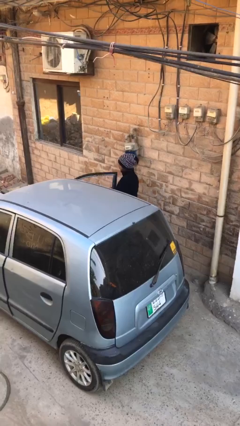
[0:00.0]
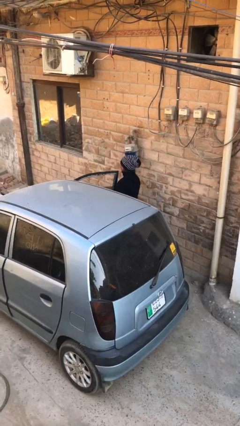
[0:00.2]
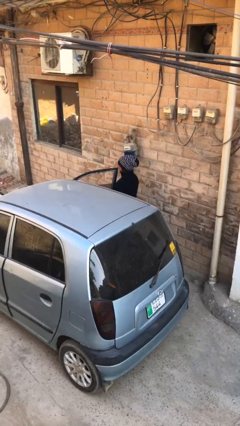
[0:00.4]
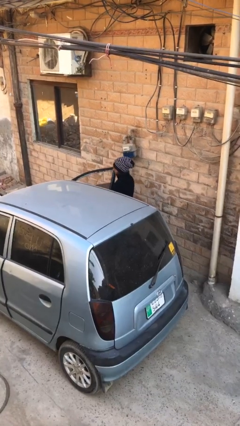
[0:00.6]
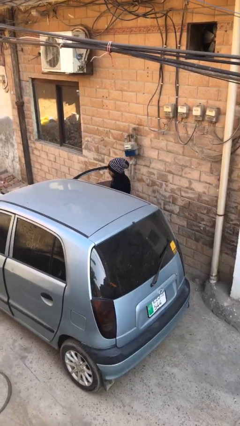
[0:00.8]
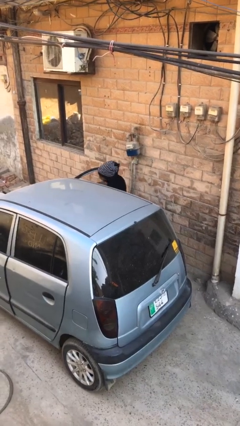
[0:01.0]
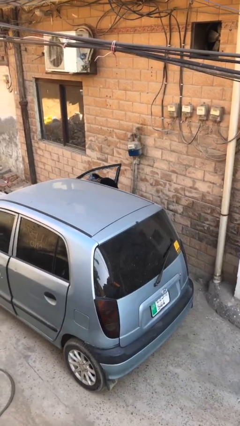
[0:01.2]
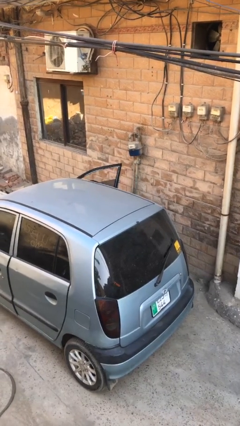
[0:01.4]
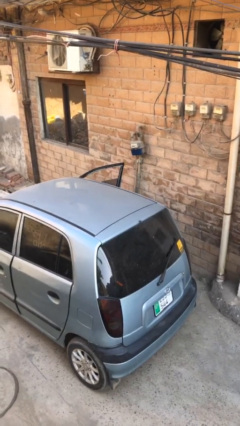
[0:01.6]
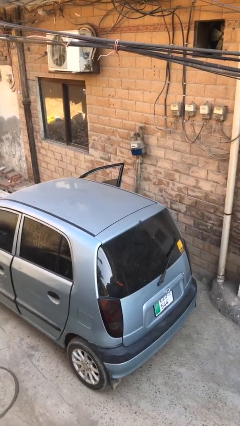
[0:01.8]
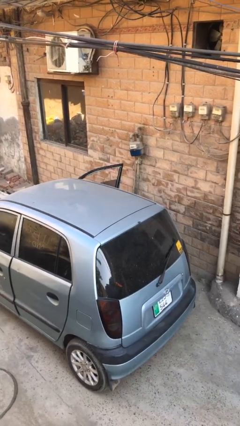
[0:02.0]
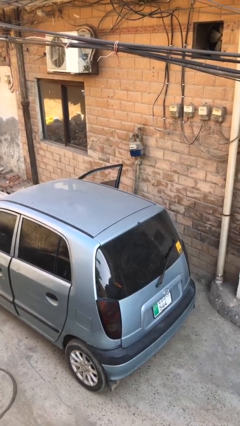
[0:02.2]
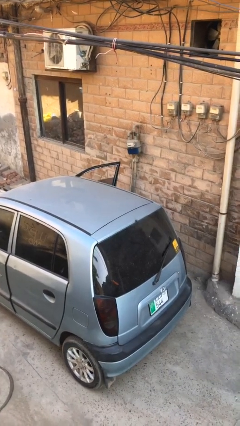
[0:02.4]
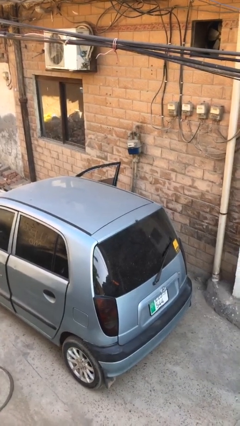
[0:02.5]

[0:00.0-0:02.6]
person enters car

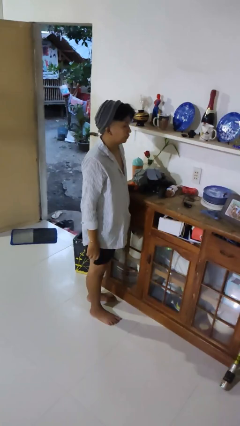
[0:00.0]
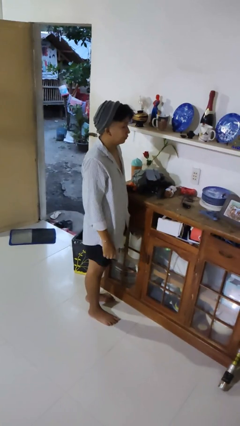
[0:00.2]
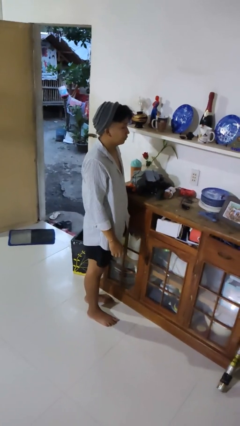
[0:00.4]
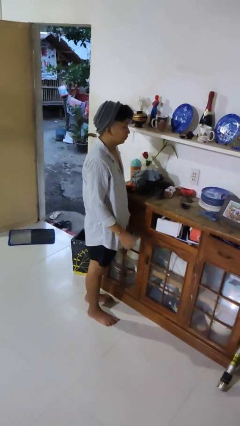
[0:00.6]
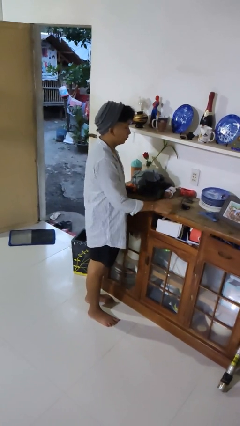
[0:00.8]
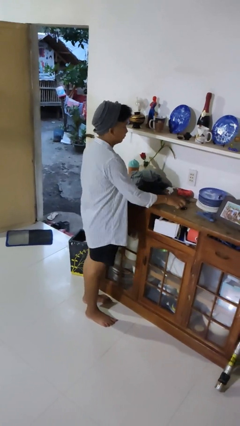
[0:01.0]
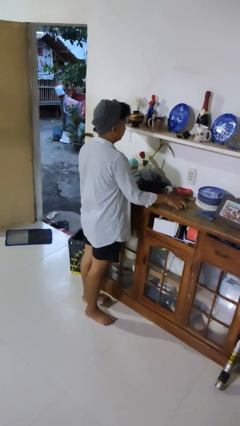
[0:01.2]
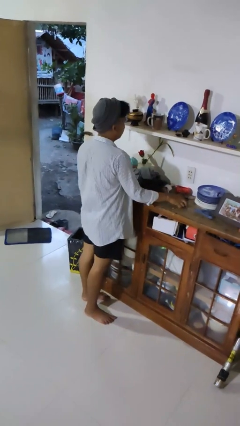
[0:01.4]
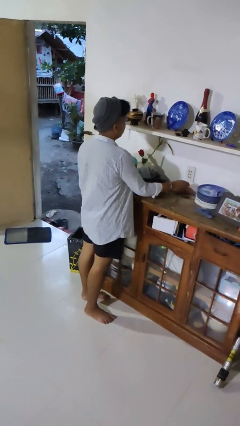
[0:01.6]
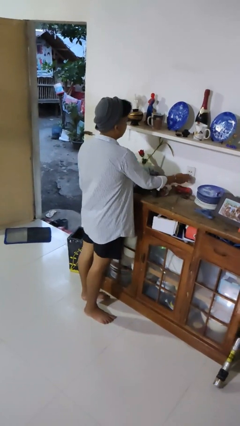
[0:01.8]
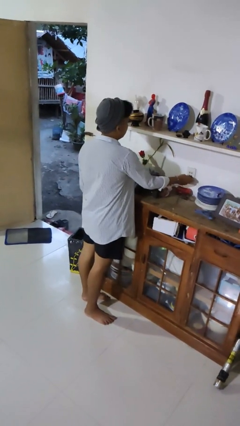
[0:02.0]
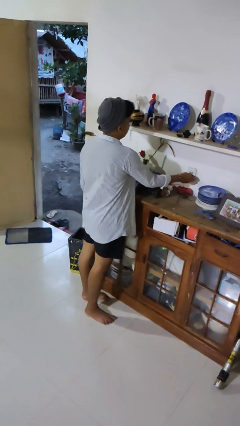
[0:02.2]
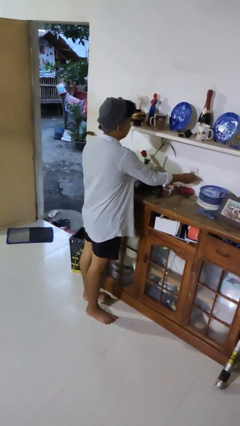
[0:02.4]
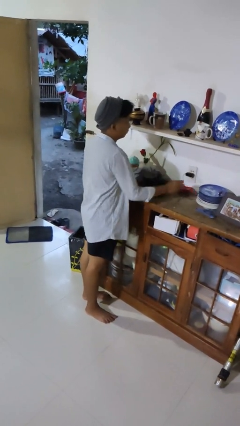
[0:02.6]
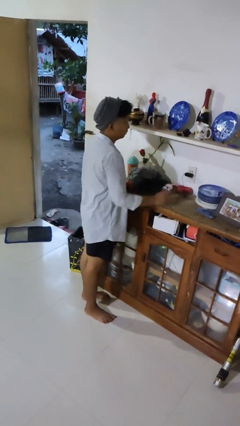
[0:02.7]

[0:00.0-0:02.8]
person plugs into electrical socket

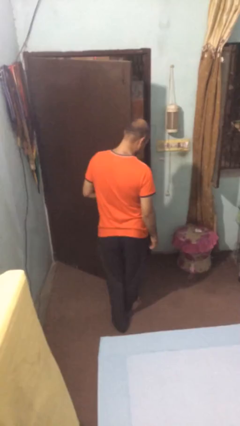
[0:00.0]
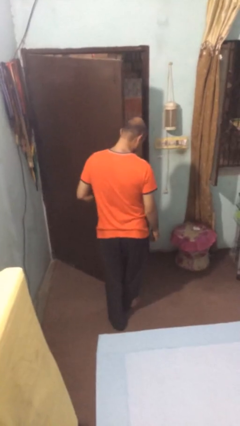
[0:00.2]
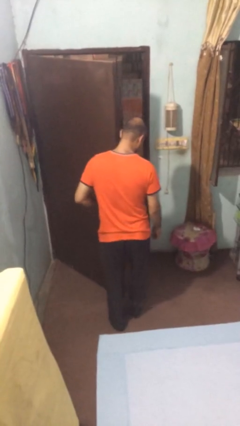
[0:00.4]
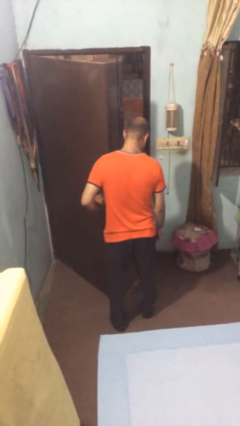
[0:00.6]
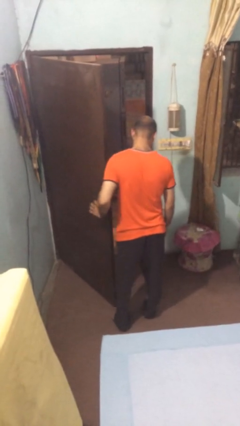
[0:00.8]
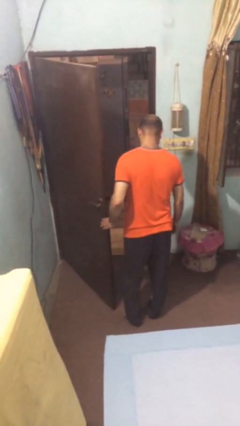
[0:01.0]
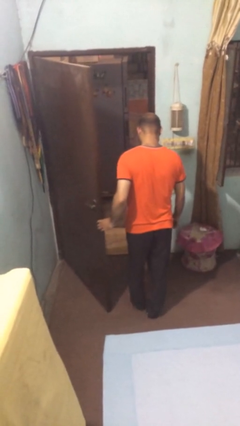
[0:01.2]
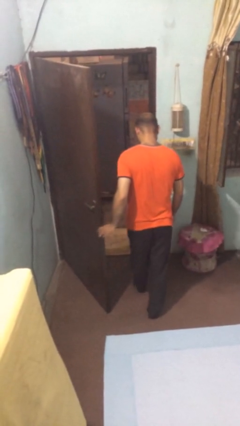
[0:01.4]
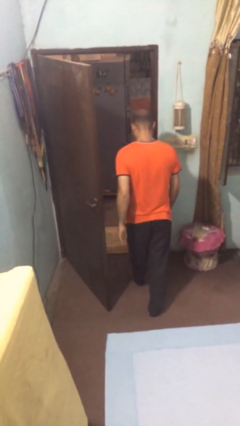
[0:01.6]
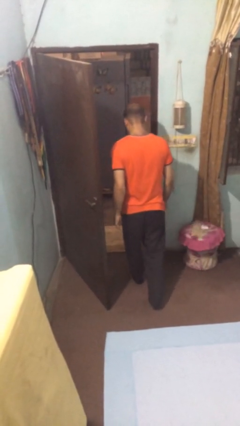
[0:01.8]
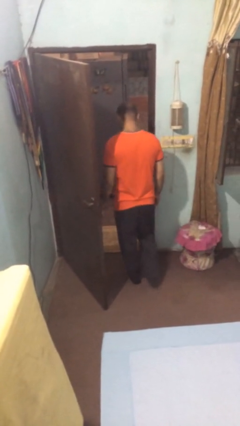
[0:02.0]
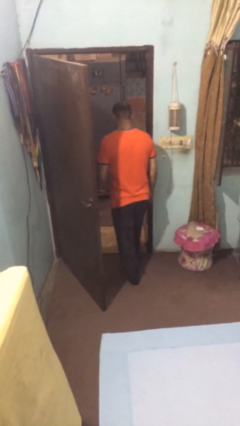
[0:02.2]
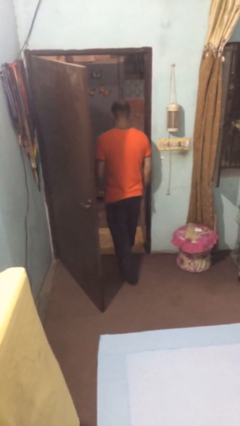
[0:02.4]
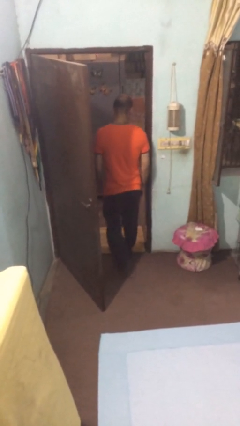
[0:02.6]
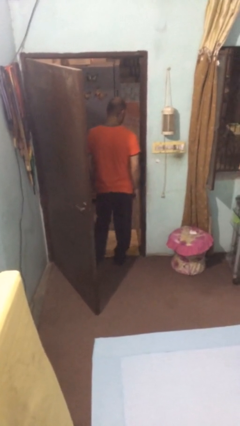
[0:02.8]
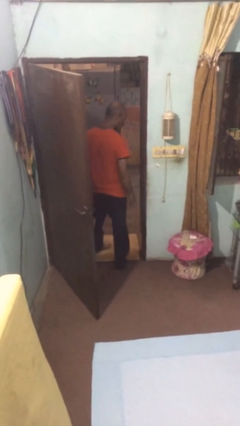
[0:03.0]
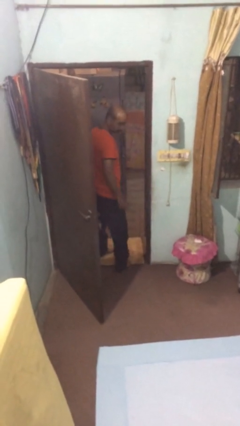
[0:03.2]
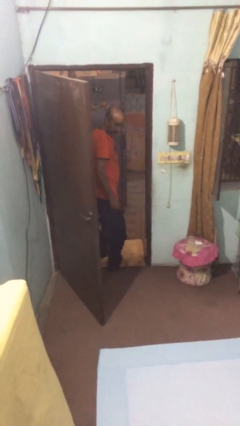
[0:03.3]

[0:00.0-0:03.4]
person exits scene through structure

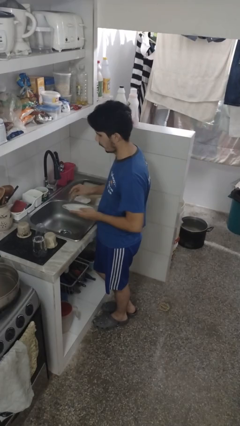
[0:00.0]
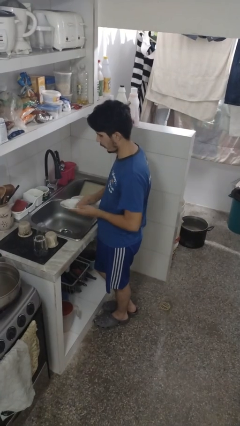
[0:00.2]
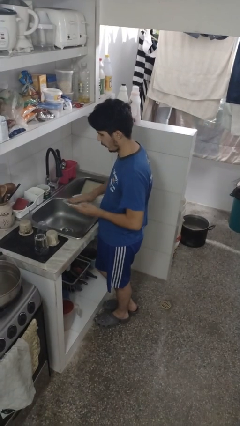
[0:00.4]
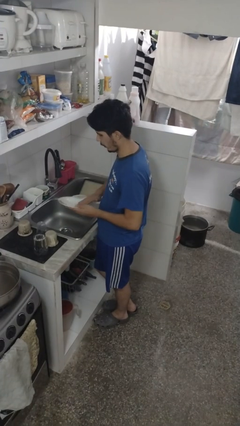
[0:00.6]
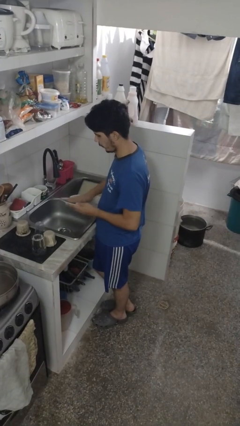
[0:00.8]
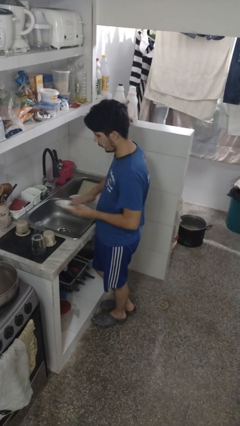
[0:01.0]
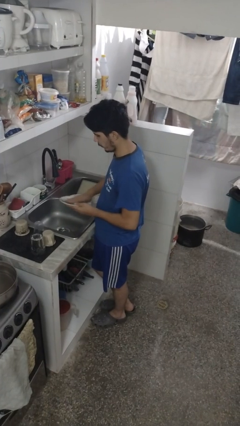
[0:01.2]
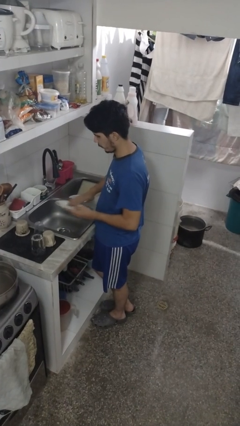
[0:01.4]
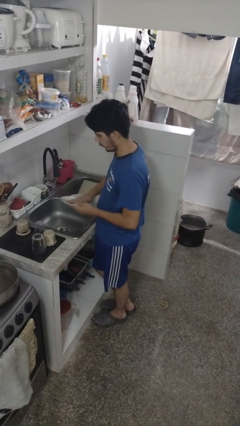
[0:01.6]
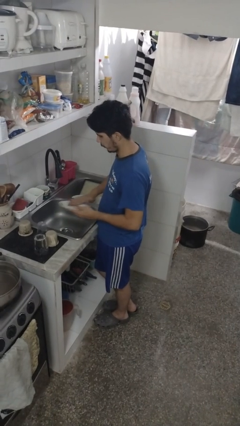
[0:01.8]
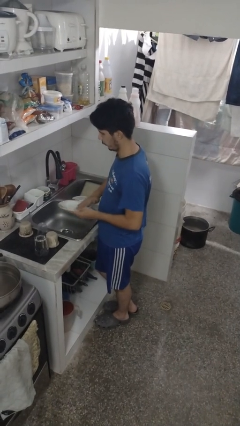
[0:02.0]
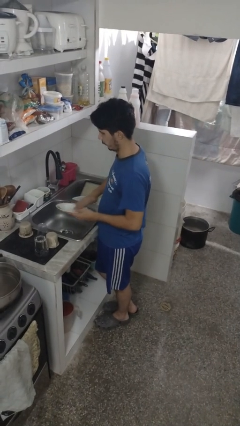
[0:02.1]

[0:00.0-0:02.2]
person washes dish

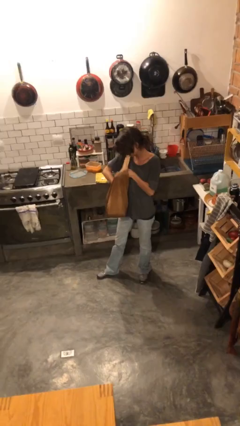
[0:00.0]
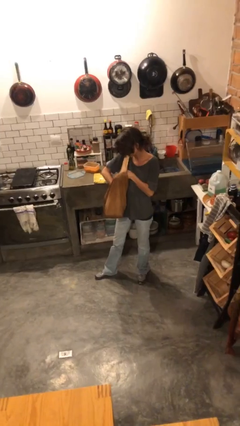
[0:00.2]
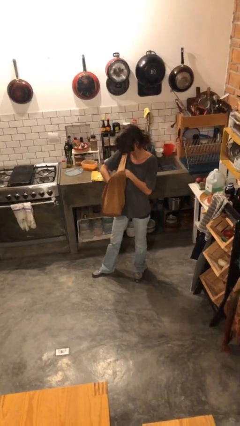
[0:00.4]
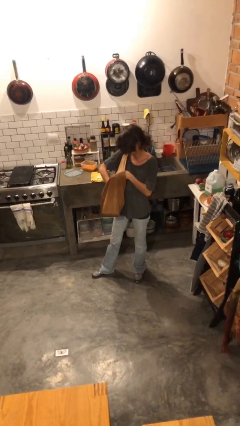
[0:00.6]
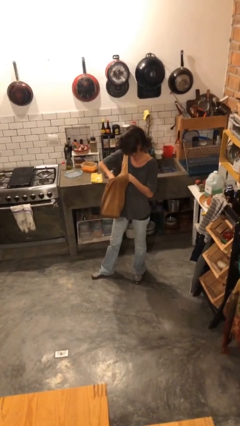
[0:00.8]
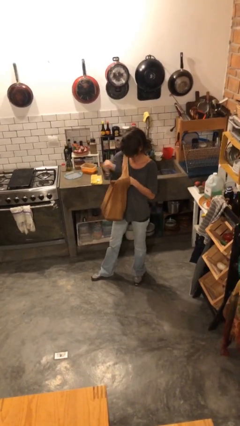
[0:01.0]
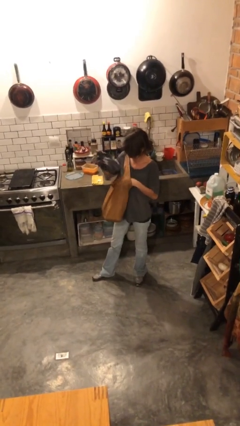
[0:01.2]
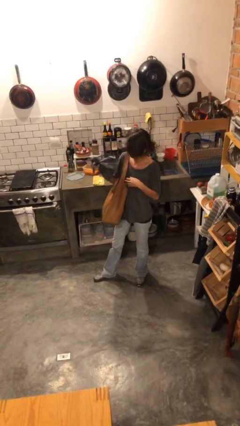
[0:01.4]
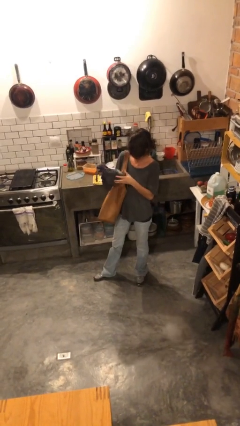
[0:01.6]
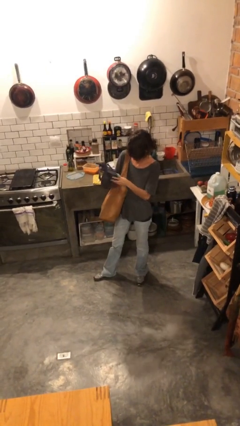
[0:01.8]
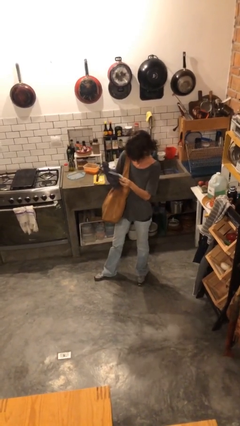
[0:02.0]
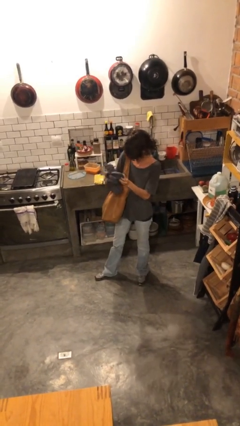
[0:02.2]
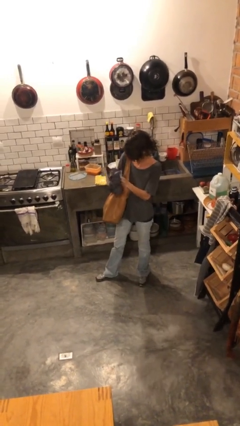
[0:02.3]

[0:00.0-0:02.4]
person takes object from purse

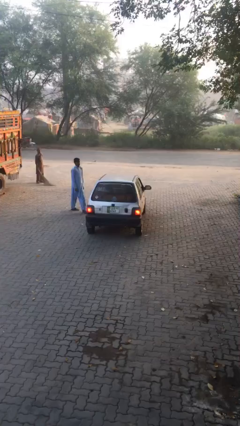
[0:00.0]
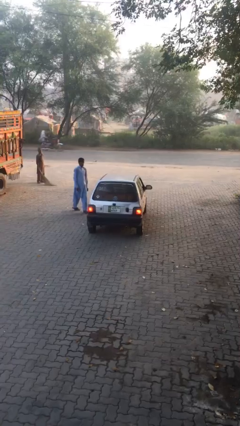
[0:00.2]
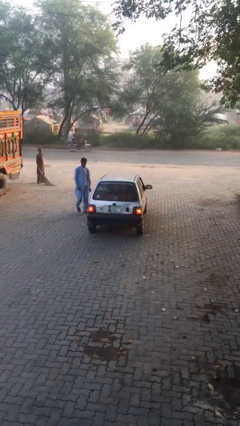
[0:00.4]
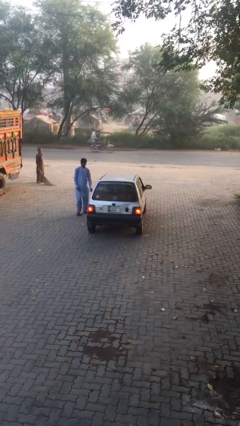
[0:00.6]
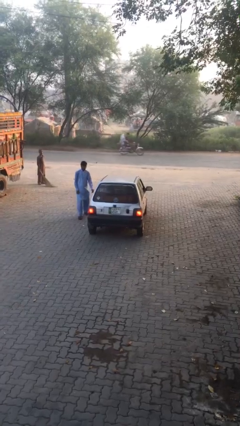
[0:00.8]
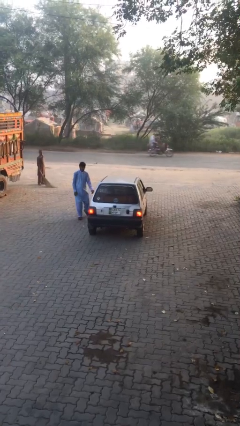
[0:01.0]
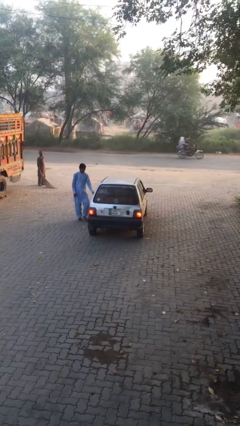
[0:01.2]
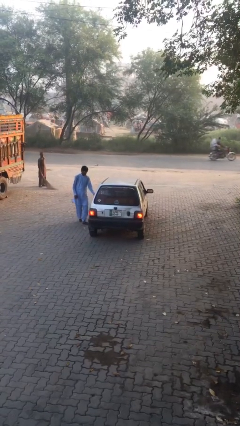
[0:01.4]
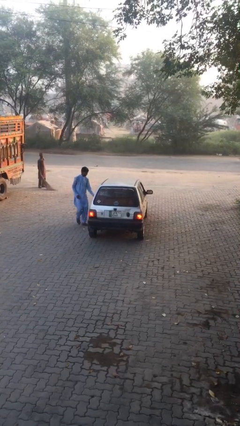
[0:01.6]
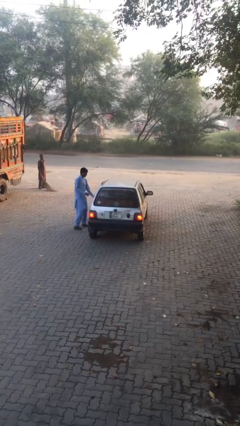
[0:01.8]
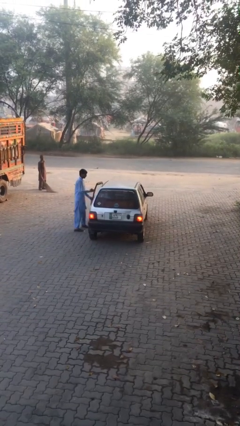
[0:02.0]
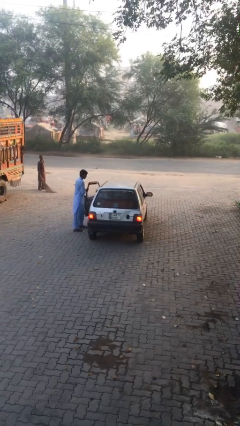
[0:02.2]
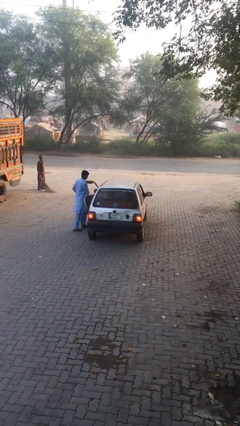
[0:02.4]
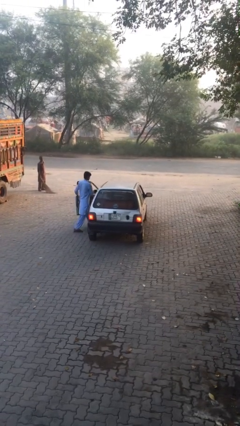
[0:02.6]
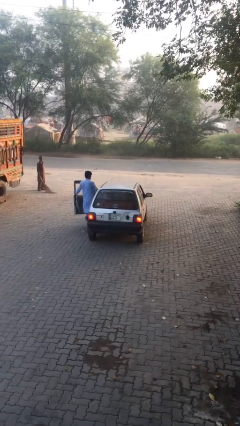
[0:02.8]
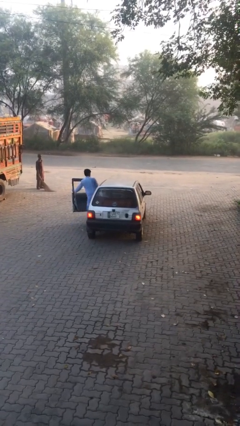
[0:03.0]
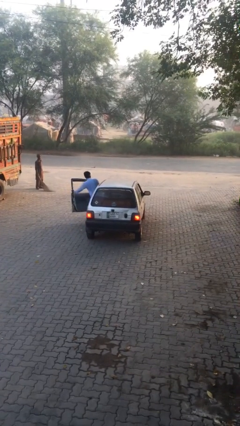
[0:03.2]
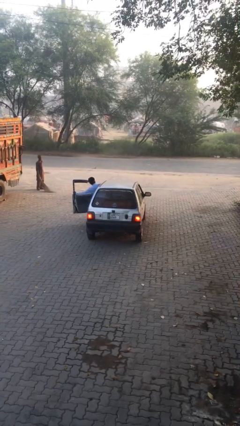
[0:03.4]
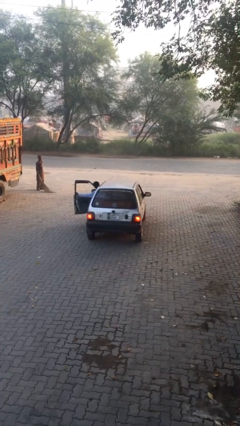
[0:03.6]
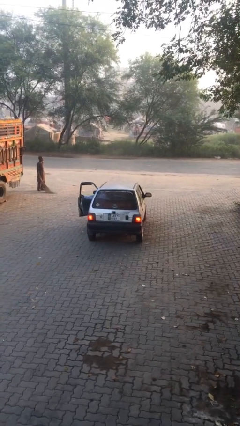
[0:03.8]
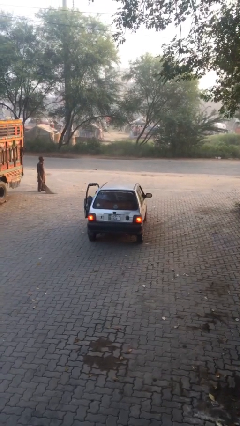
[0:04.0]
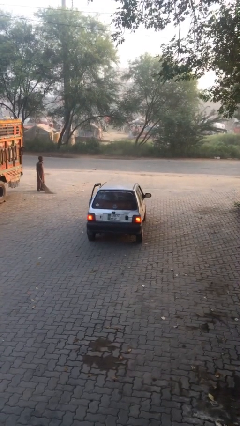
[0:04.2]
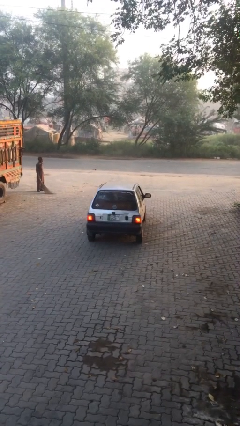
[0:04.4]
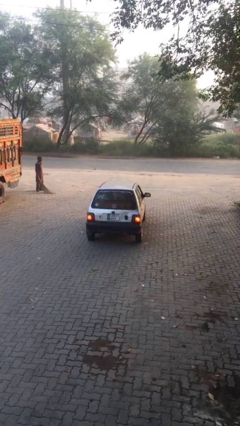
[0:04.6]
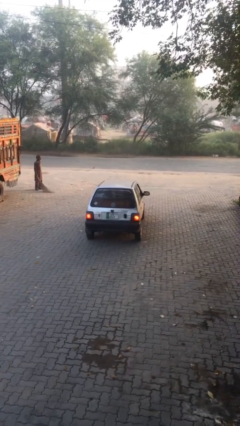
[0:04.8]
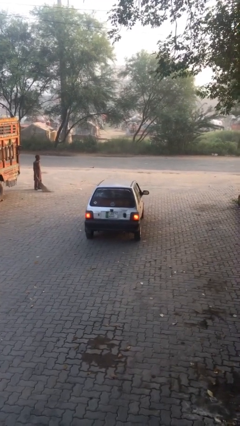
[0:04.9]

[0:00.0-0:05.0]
car picks up person
